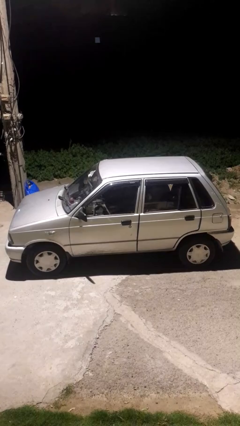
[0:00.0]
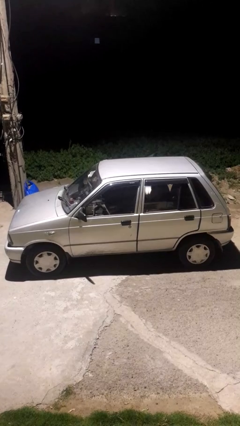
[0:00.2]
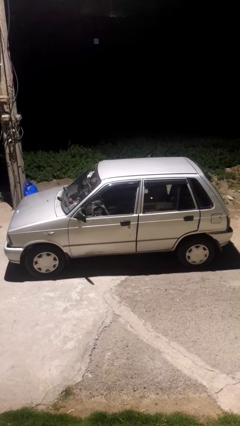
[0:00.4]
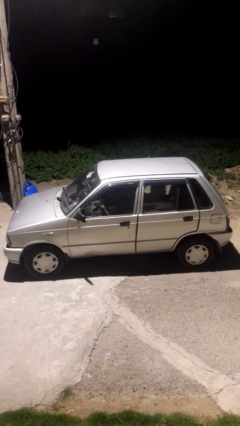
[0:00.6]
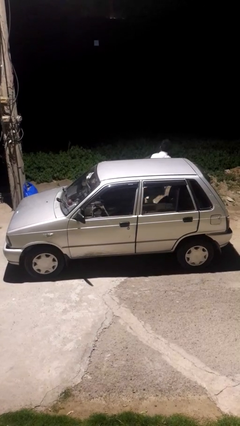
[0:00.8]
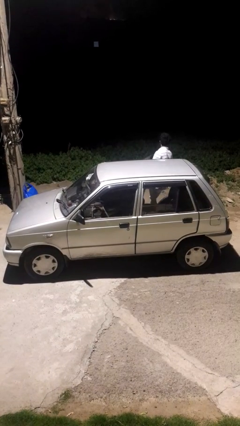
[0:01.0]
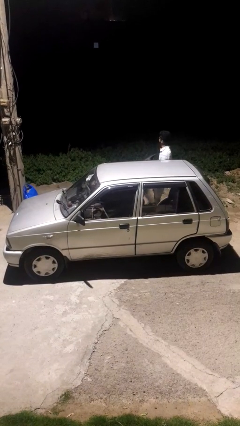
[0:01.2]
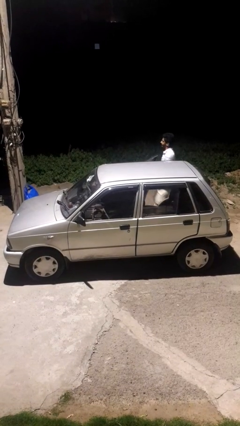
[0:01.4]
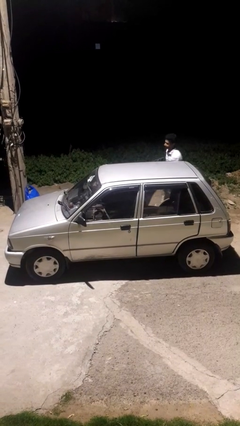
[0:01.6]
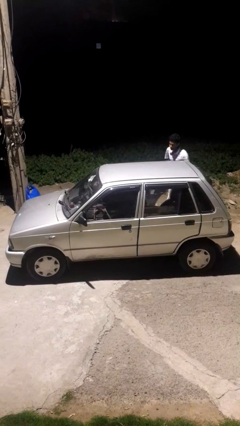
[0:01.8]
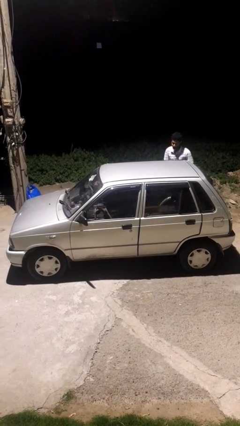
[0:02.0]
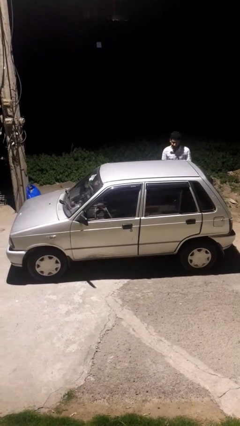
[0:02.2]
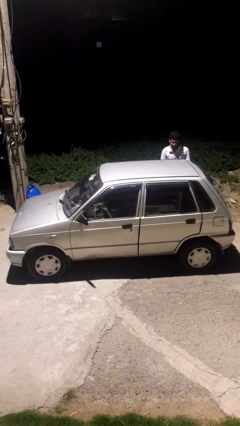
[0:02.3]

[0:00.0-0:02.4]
car drops off person

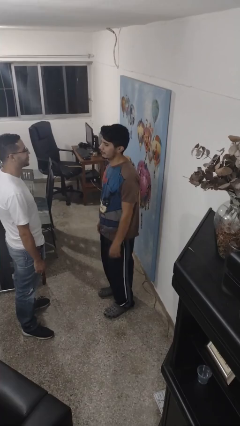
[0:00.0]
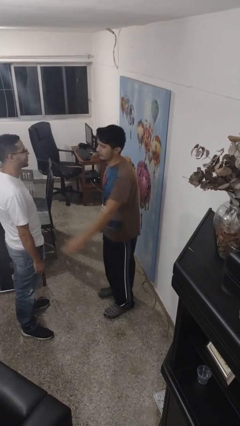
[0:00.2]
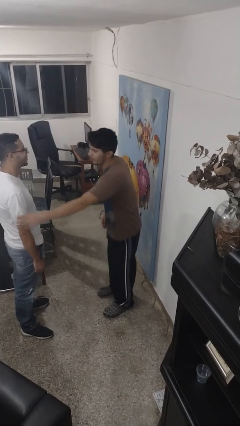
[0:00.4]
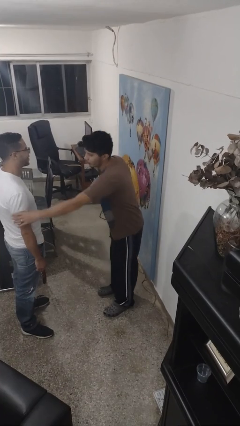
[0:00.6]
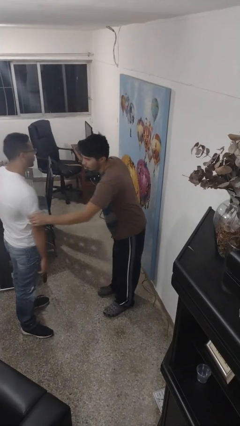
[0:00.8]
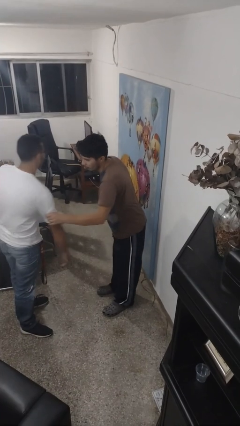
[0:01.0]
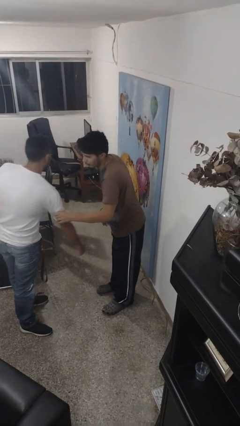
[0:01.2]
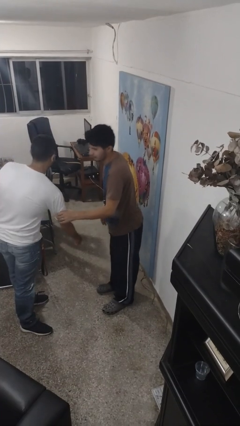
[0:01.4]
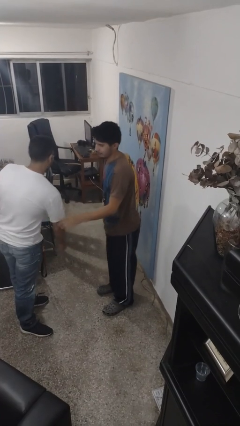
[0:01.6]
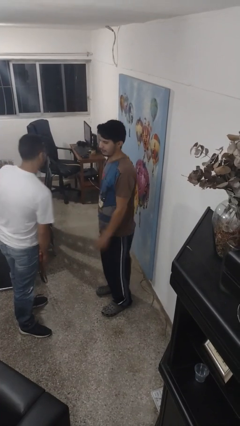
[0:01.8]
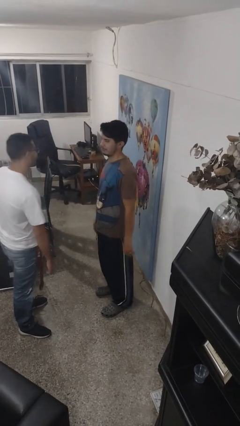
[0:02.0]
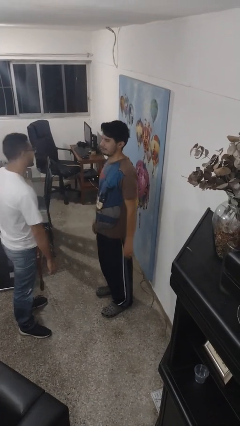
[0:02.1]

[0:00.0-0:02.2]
person grabs person by bicep

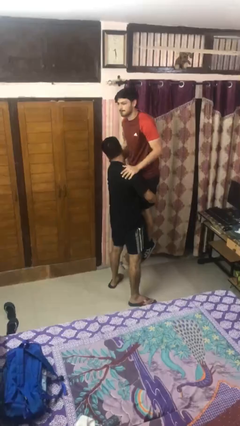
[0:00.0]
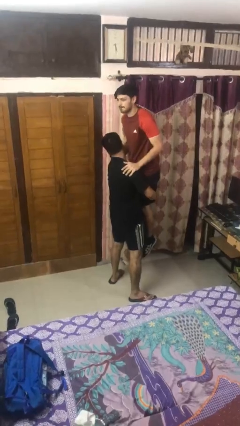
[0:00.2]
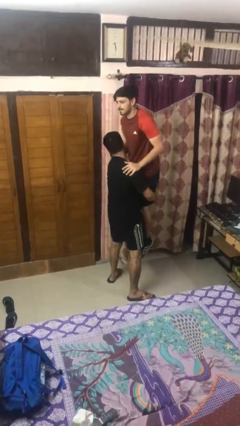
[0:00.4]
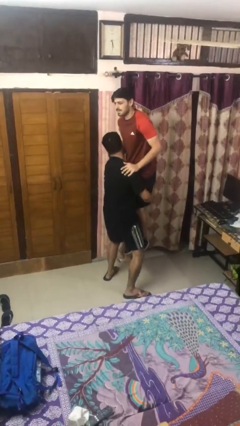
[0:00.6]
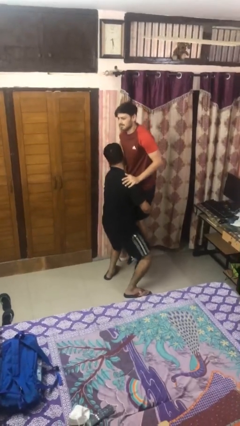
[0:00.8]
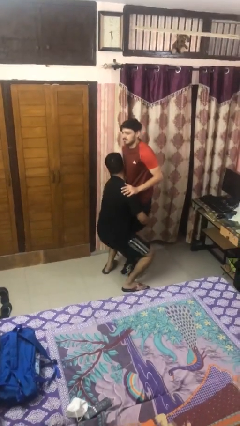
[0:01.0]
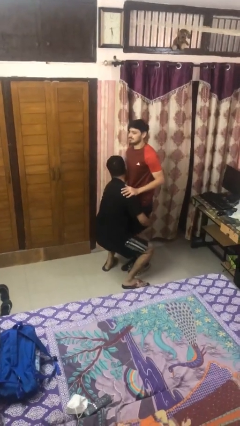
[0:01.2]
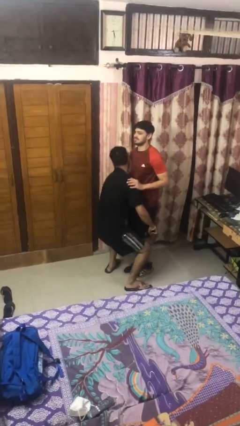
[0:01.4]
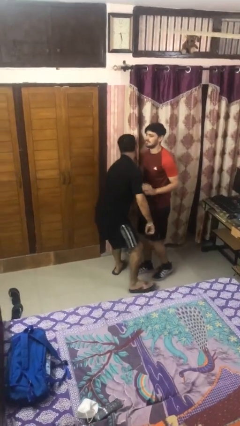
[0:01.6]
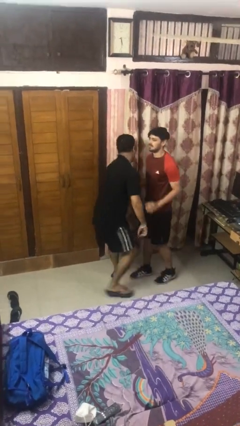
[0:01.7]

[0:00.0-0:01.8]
person puts down person

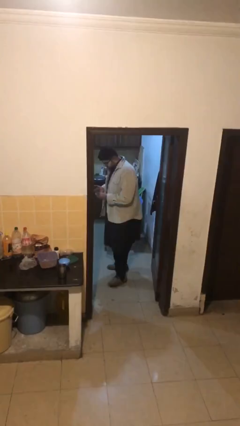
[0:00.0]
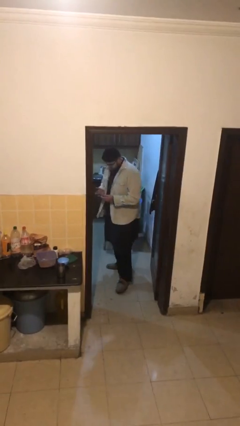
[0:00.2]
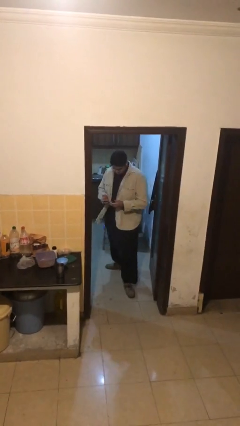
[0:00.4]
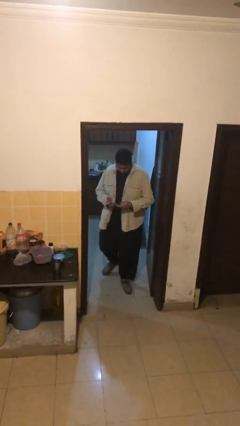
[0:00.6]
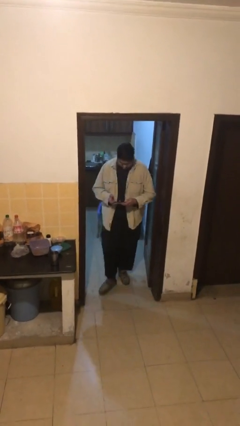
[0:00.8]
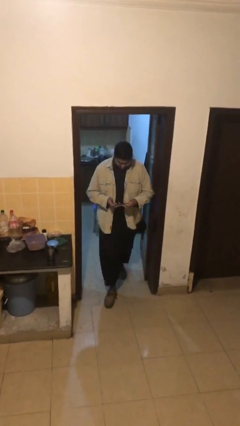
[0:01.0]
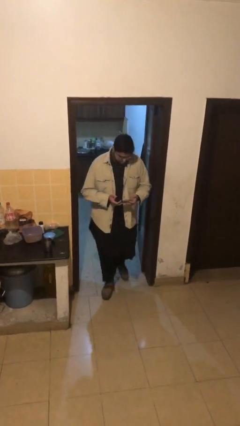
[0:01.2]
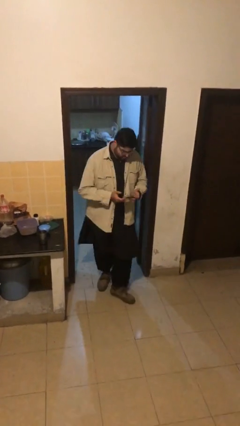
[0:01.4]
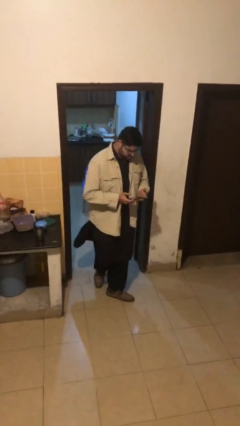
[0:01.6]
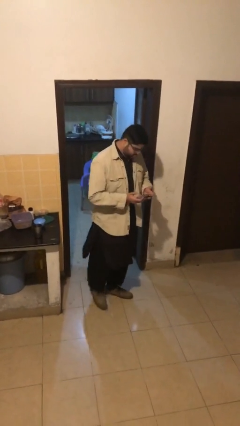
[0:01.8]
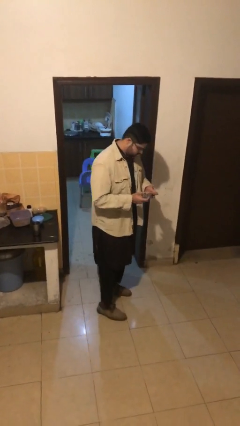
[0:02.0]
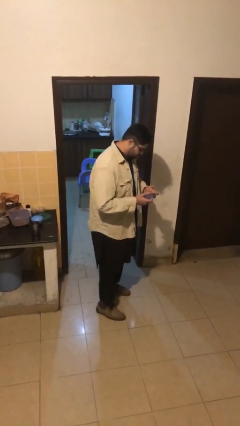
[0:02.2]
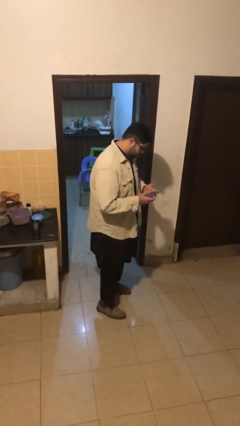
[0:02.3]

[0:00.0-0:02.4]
person enters scene through structure

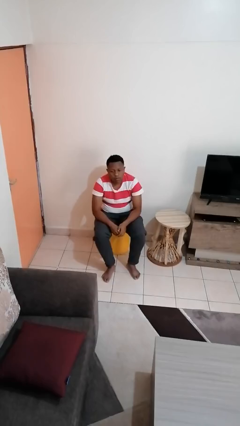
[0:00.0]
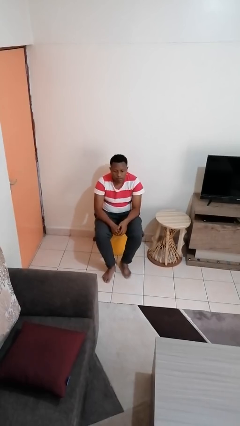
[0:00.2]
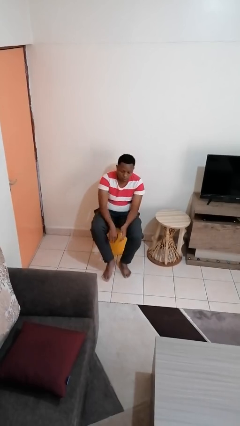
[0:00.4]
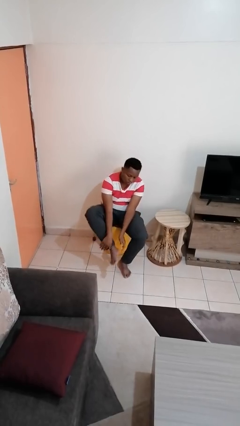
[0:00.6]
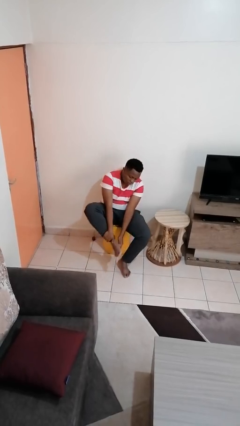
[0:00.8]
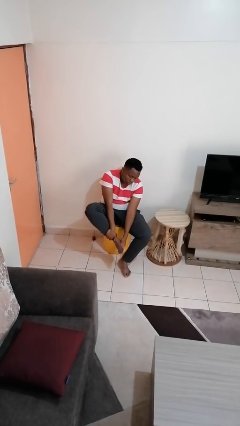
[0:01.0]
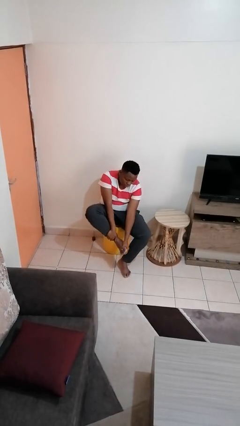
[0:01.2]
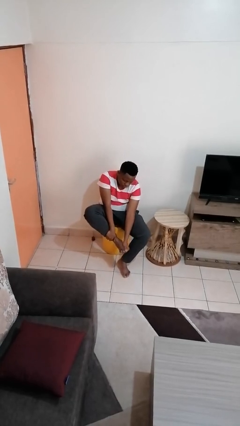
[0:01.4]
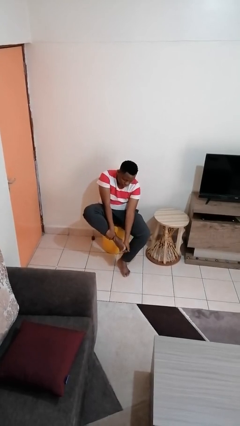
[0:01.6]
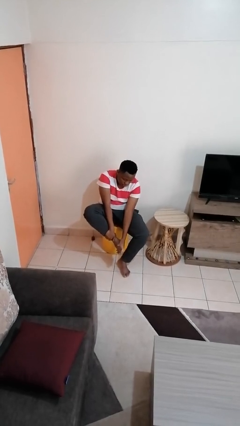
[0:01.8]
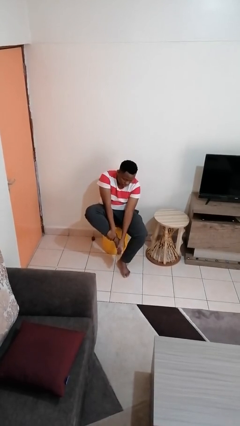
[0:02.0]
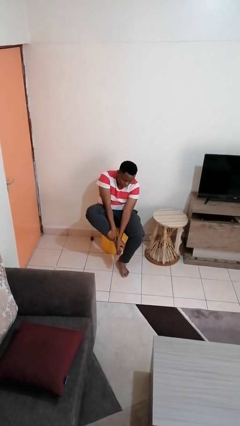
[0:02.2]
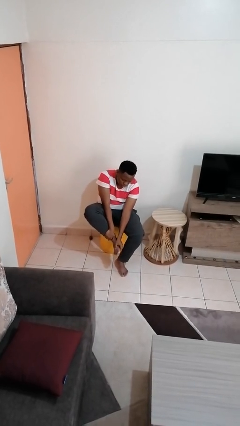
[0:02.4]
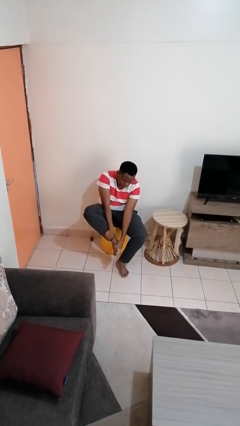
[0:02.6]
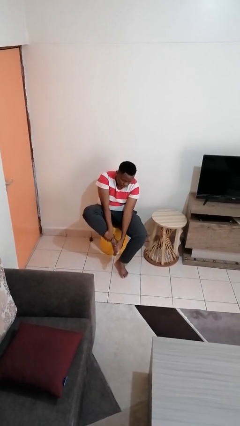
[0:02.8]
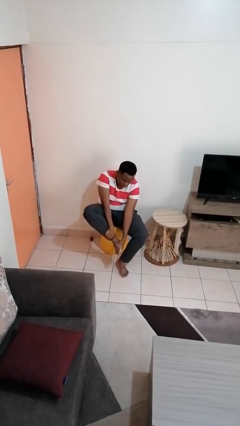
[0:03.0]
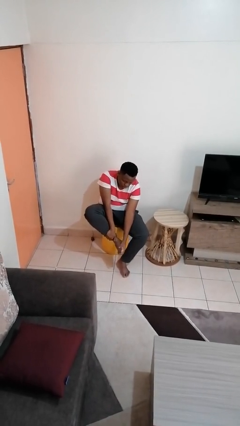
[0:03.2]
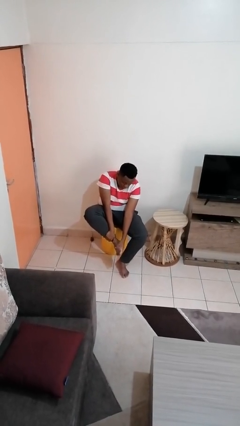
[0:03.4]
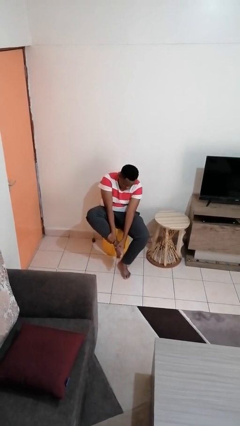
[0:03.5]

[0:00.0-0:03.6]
person rubs foot

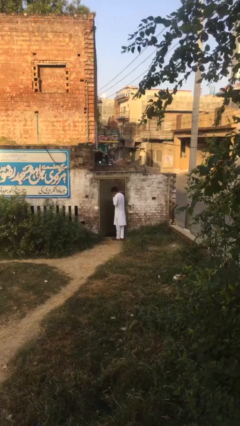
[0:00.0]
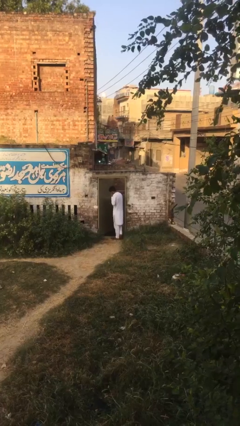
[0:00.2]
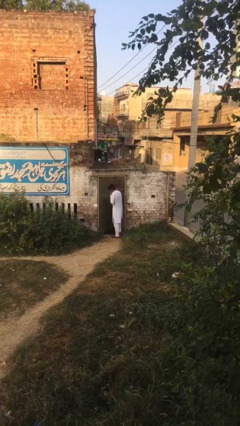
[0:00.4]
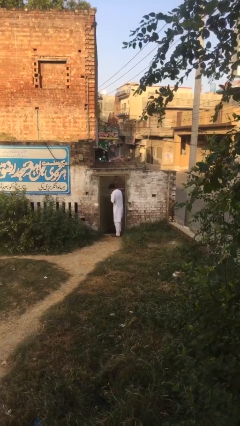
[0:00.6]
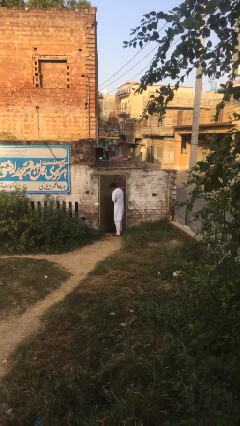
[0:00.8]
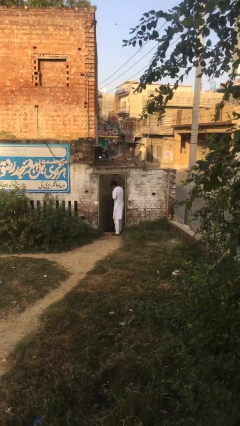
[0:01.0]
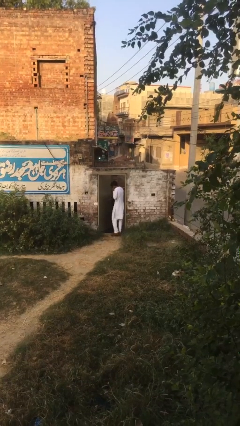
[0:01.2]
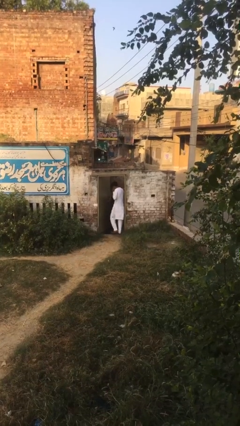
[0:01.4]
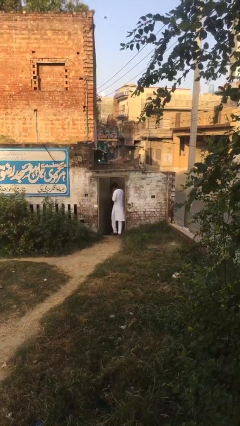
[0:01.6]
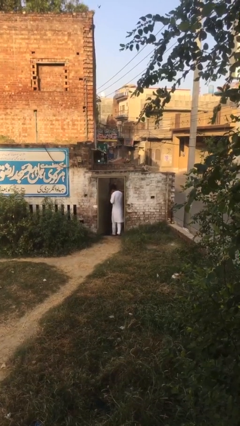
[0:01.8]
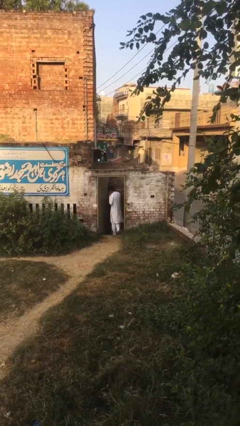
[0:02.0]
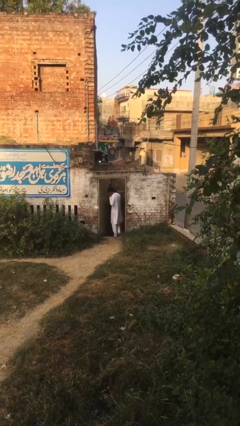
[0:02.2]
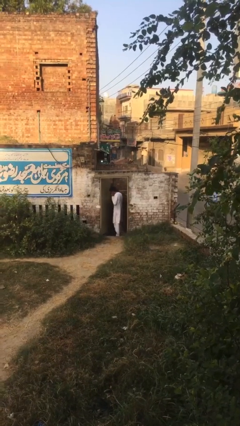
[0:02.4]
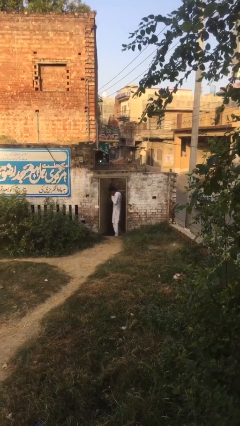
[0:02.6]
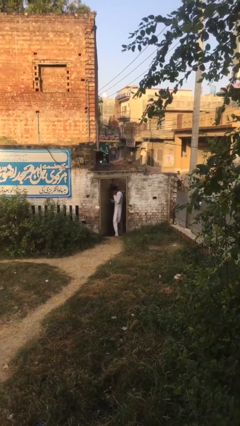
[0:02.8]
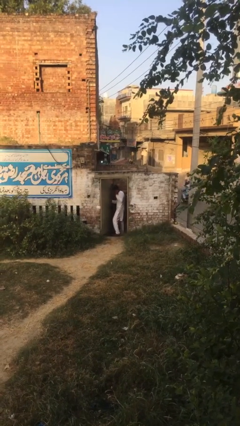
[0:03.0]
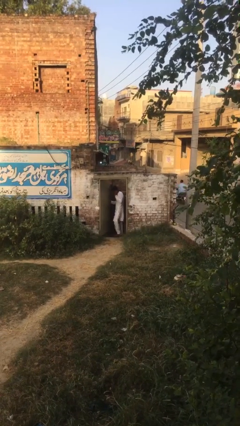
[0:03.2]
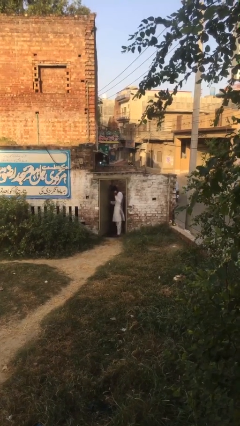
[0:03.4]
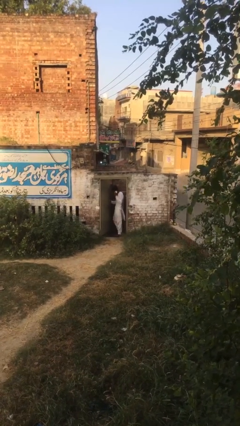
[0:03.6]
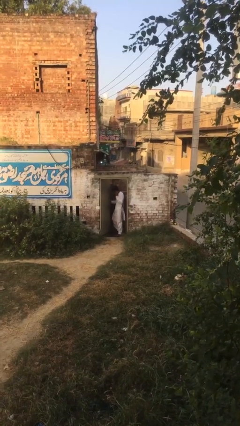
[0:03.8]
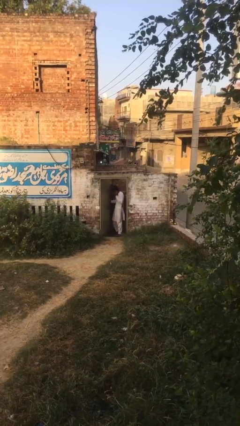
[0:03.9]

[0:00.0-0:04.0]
person exits scene through structure

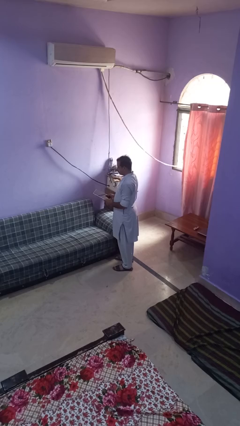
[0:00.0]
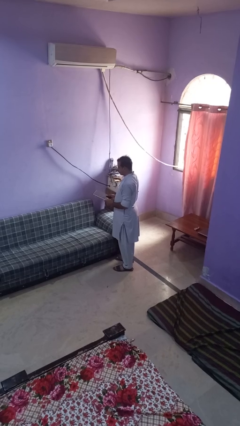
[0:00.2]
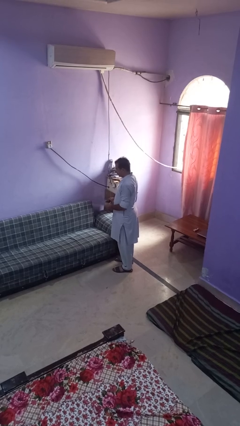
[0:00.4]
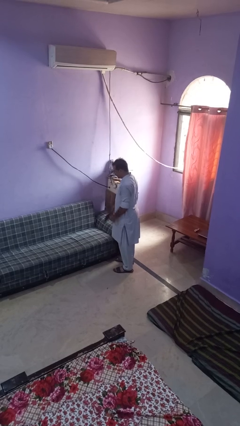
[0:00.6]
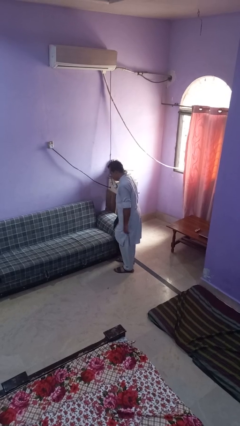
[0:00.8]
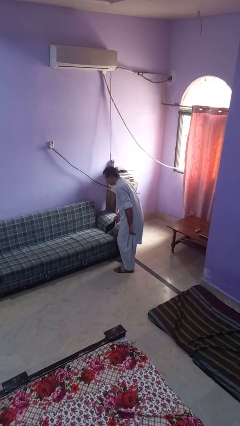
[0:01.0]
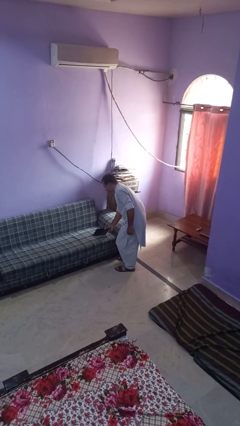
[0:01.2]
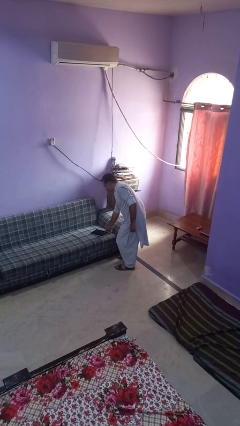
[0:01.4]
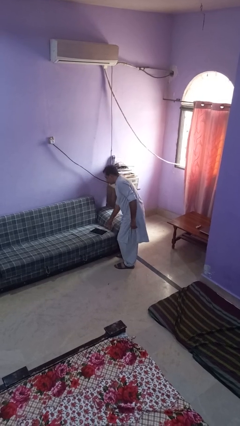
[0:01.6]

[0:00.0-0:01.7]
person puts down object on couch
